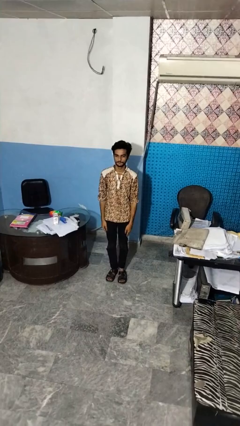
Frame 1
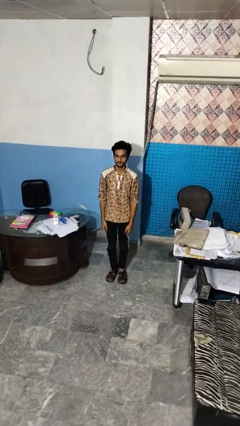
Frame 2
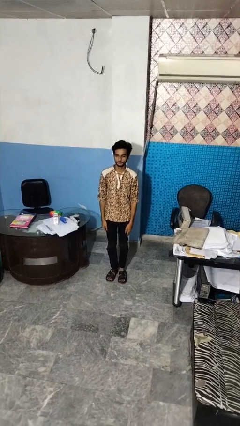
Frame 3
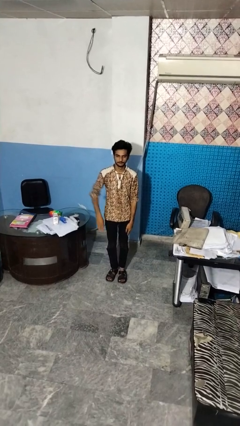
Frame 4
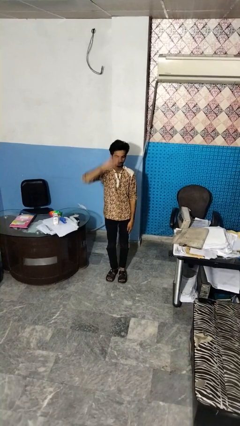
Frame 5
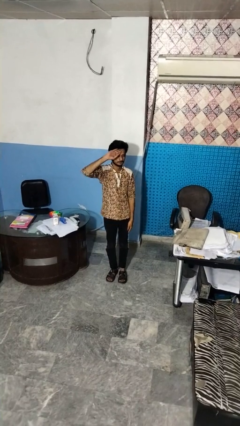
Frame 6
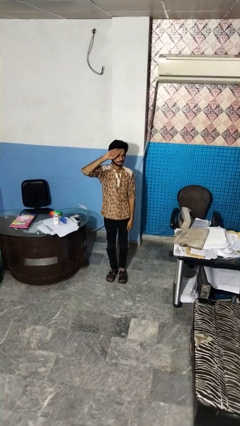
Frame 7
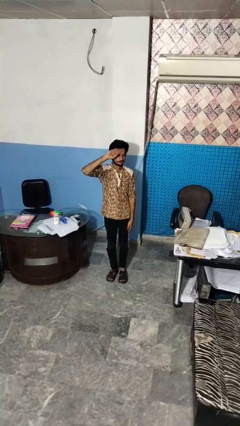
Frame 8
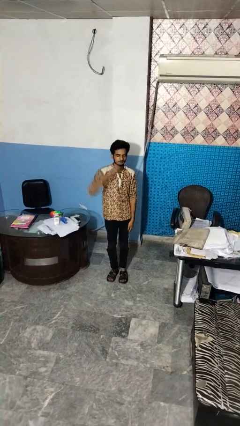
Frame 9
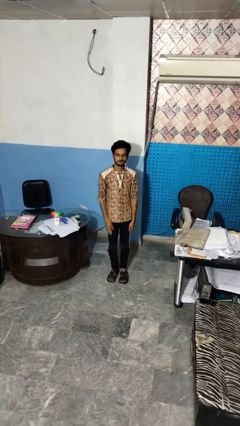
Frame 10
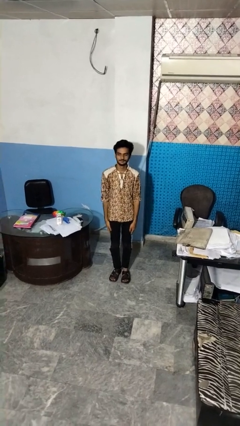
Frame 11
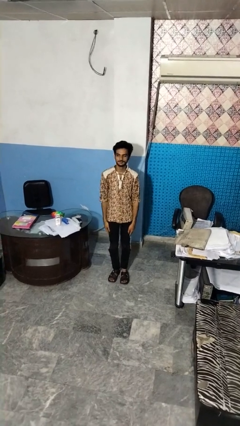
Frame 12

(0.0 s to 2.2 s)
person salutes

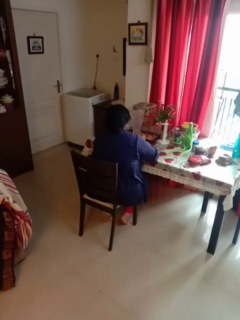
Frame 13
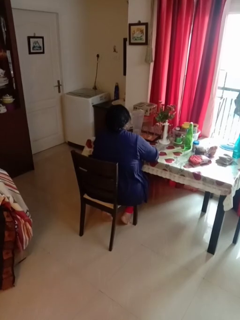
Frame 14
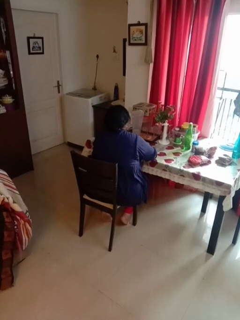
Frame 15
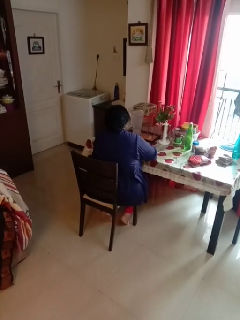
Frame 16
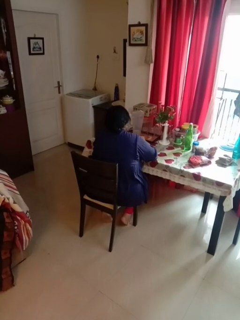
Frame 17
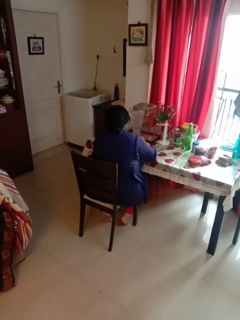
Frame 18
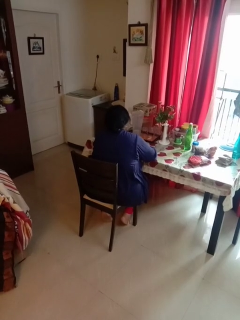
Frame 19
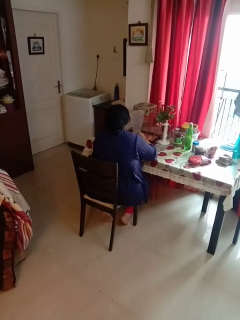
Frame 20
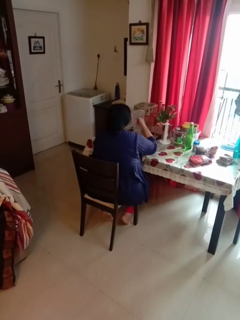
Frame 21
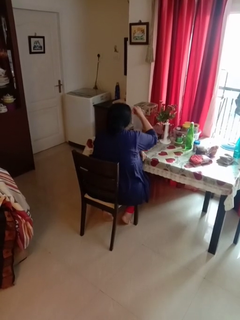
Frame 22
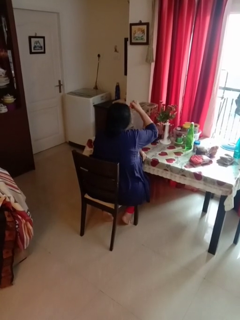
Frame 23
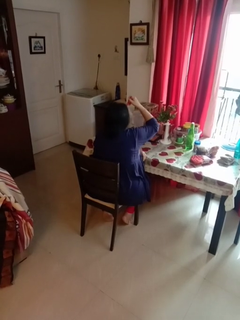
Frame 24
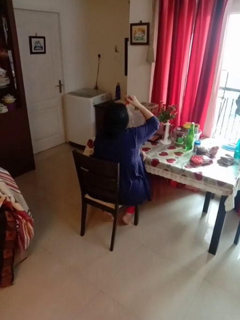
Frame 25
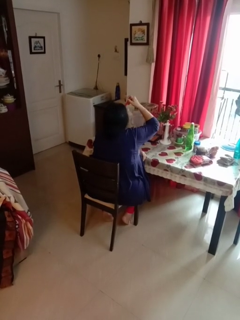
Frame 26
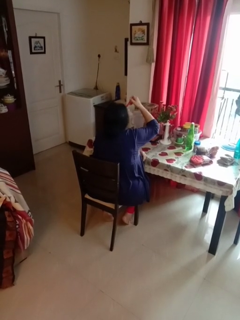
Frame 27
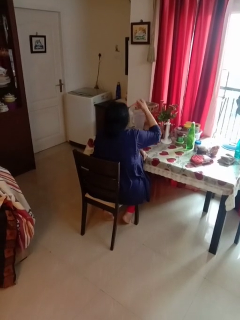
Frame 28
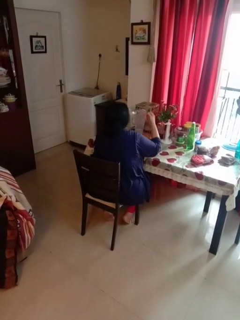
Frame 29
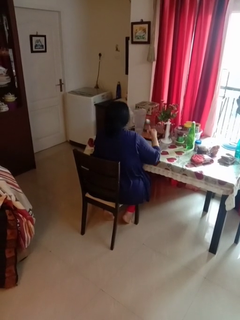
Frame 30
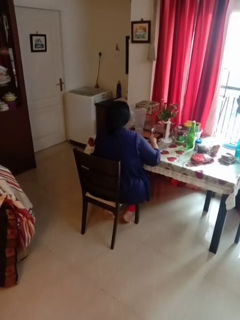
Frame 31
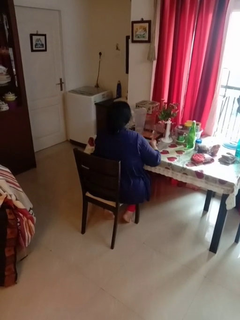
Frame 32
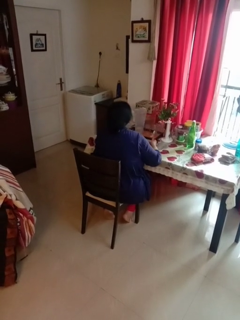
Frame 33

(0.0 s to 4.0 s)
person eats with utensil

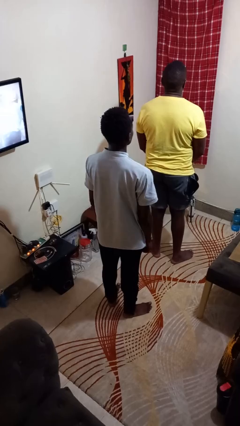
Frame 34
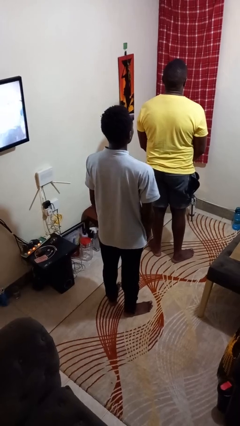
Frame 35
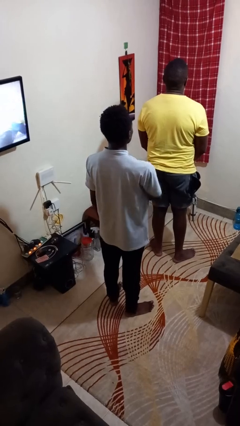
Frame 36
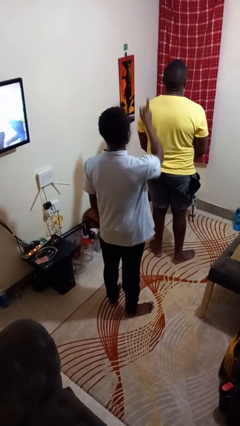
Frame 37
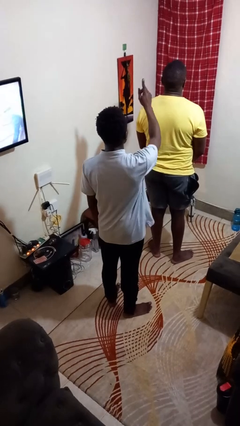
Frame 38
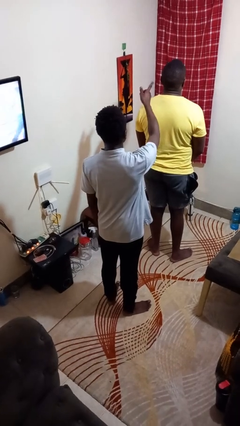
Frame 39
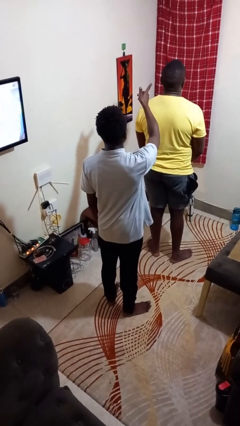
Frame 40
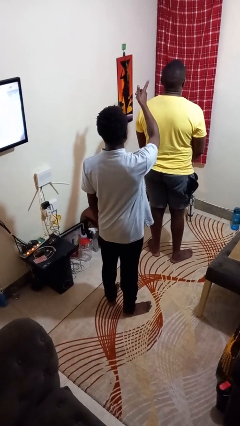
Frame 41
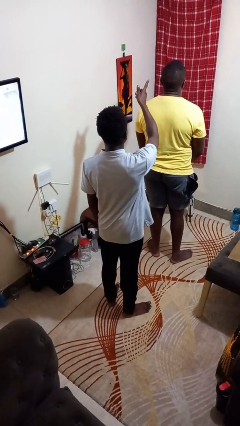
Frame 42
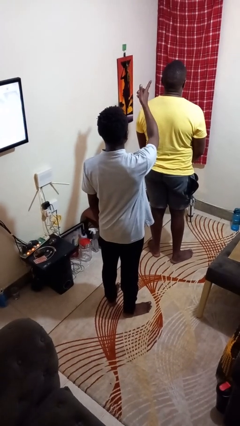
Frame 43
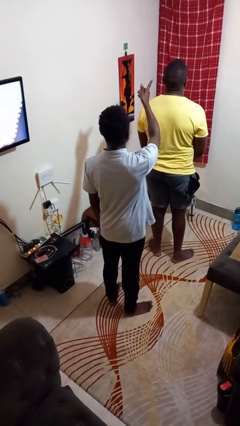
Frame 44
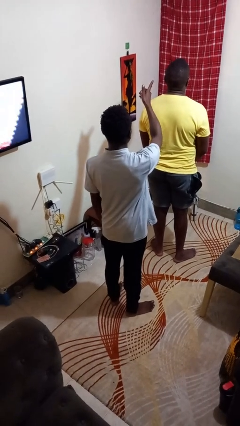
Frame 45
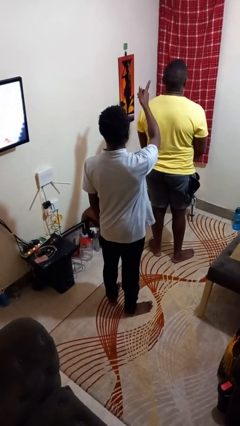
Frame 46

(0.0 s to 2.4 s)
person points at person

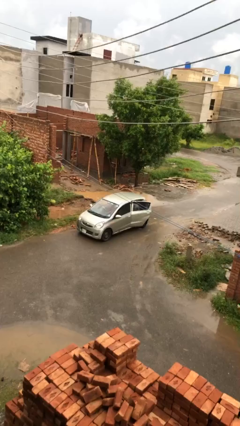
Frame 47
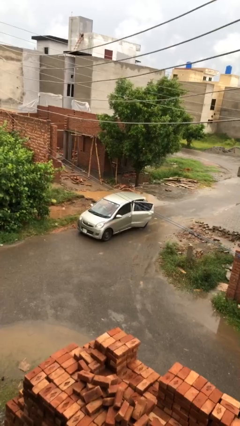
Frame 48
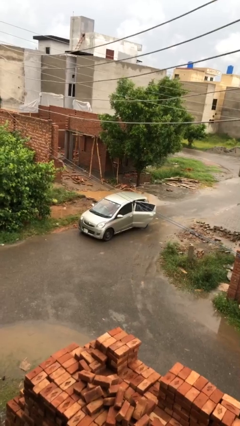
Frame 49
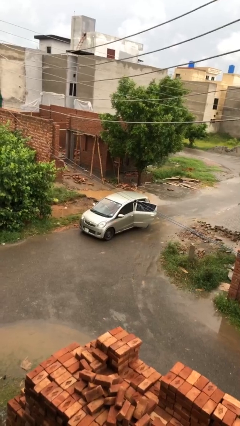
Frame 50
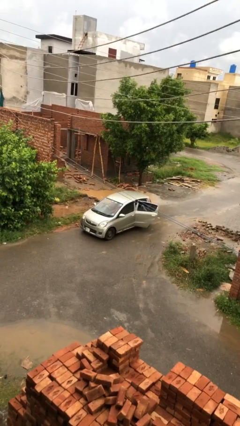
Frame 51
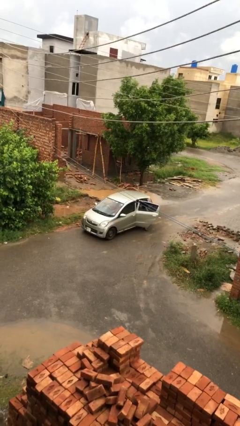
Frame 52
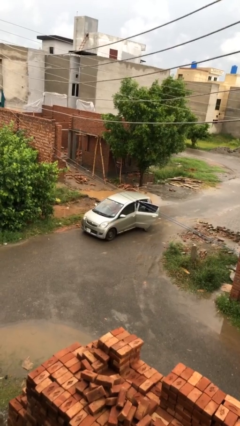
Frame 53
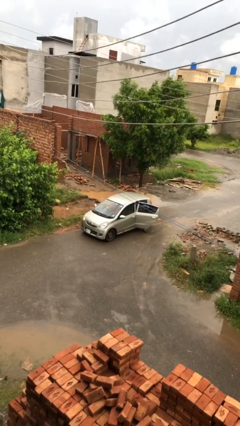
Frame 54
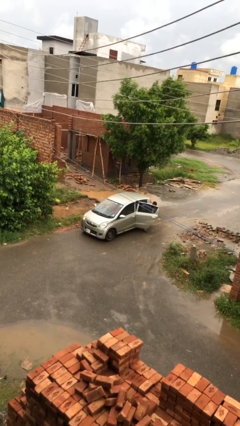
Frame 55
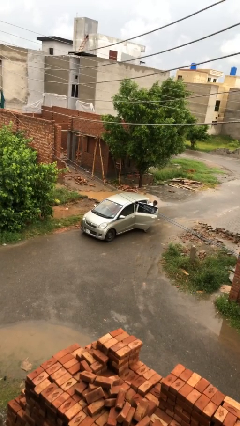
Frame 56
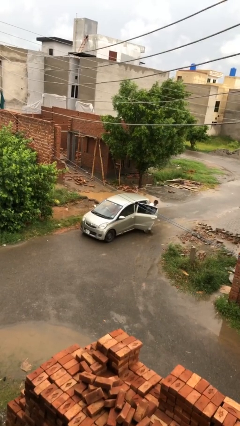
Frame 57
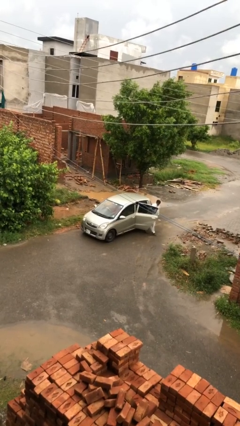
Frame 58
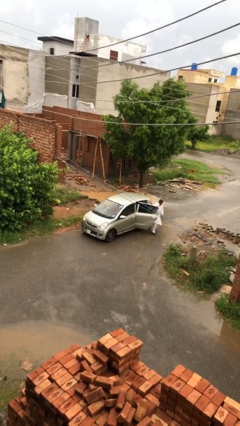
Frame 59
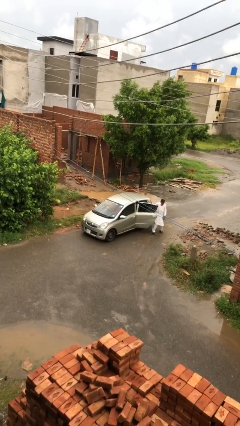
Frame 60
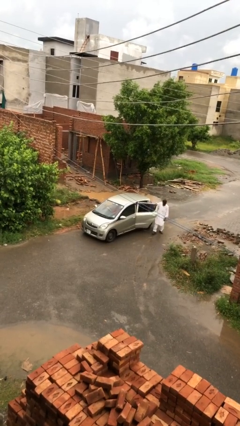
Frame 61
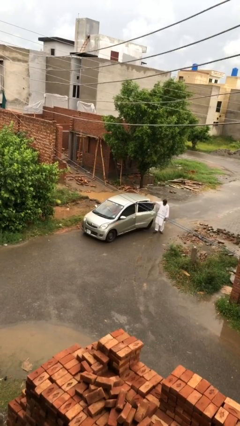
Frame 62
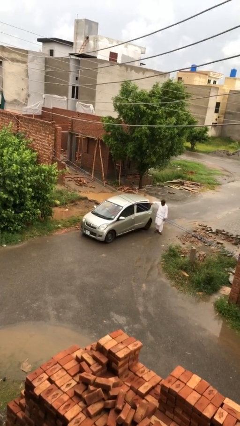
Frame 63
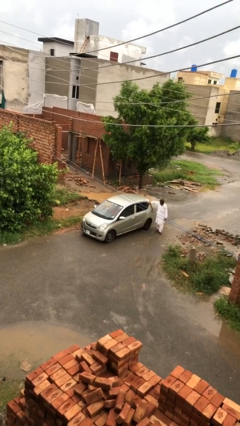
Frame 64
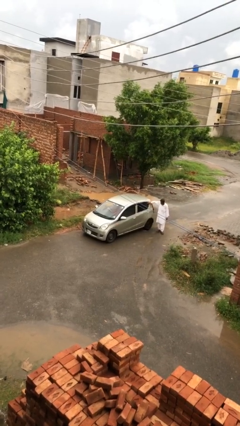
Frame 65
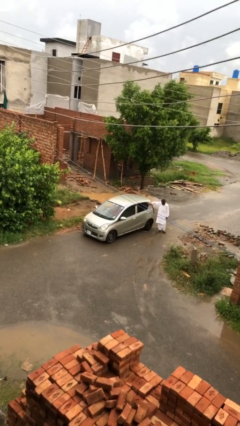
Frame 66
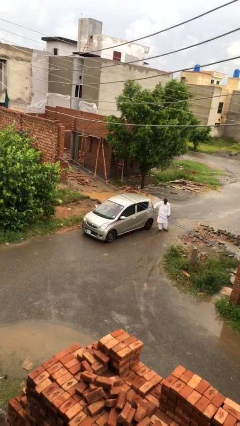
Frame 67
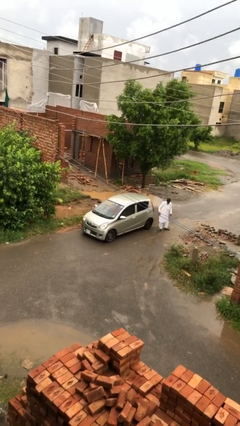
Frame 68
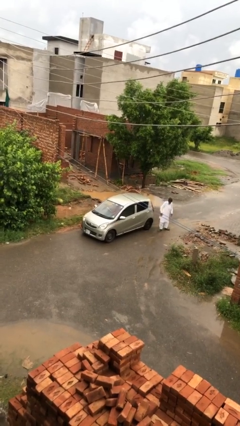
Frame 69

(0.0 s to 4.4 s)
car drops off person

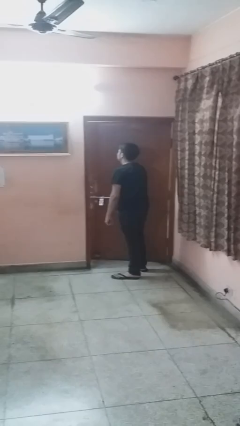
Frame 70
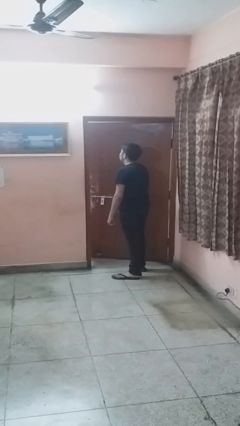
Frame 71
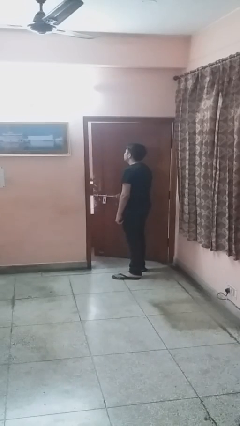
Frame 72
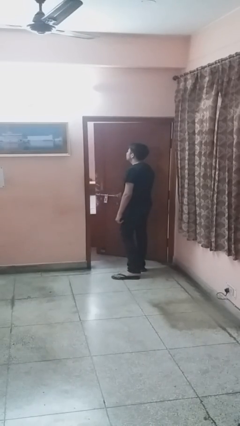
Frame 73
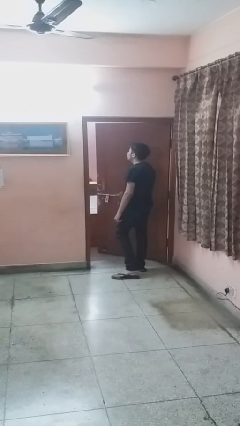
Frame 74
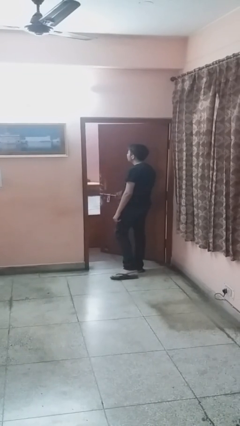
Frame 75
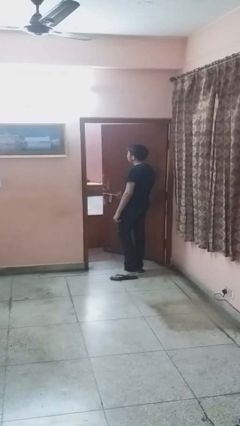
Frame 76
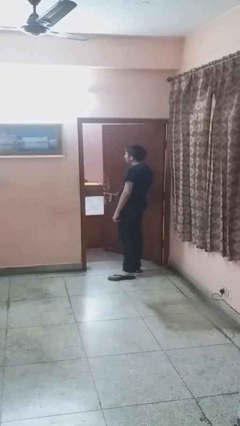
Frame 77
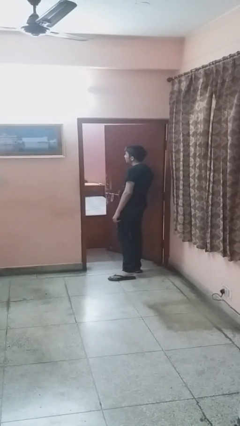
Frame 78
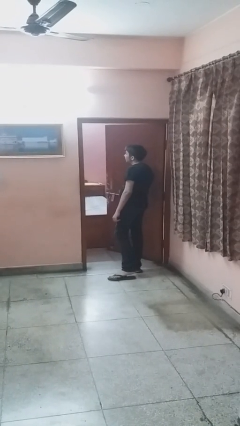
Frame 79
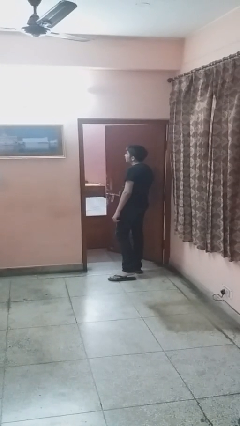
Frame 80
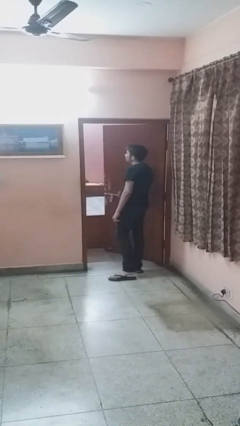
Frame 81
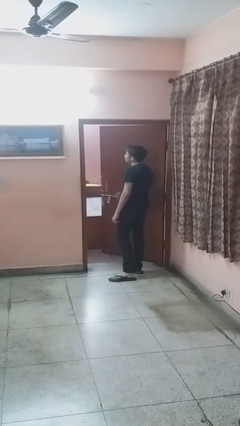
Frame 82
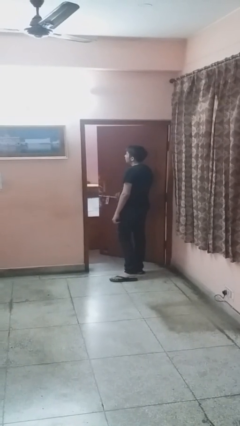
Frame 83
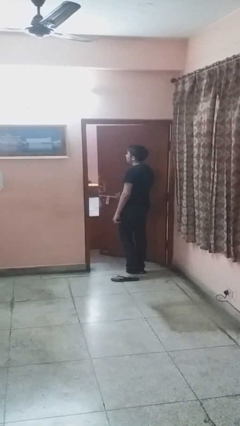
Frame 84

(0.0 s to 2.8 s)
person opens facility door

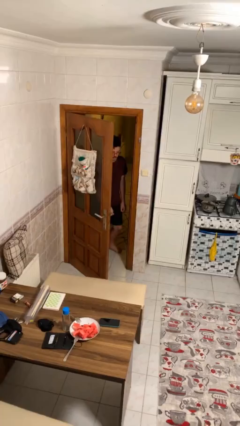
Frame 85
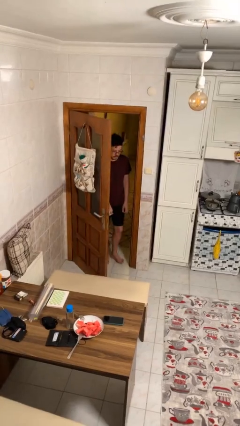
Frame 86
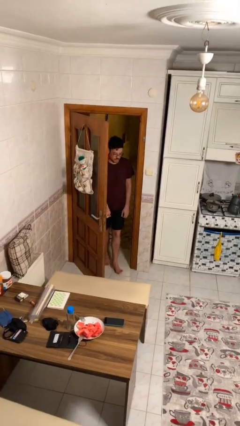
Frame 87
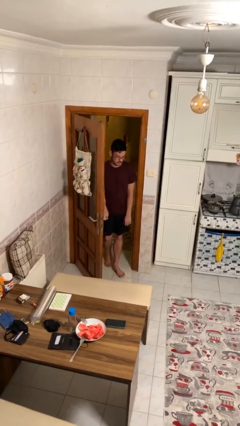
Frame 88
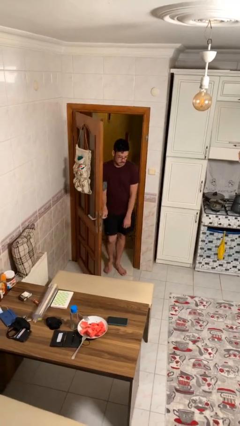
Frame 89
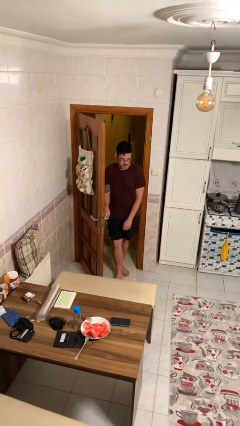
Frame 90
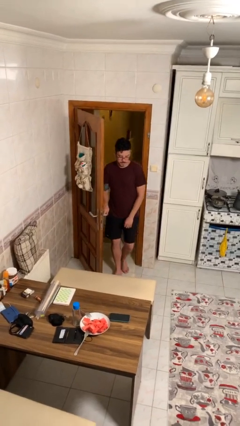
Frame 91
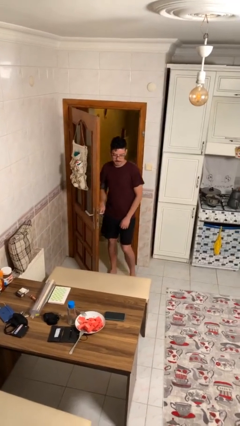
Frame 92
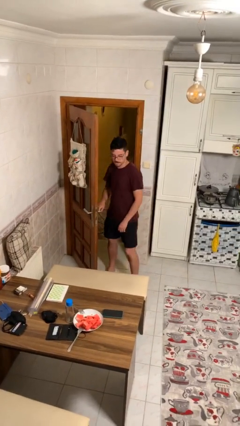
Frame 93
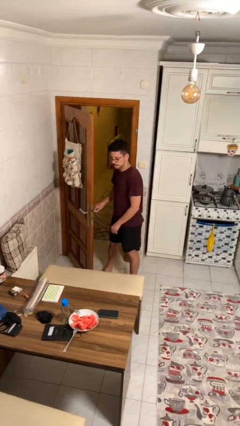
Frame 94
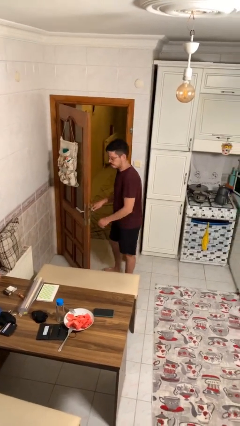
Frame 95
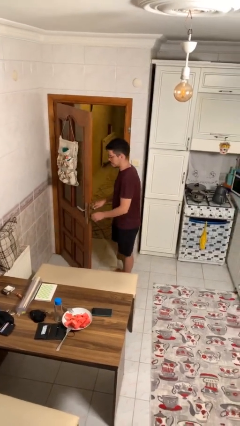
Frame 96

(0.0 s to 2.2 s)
person enters scene through structure

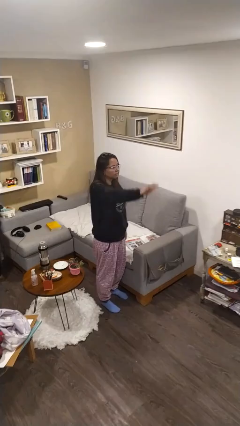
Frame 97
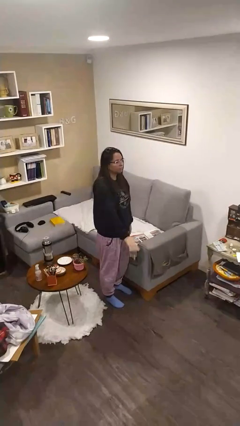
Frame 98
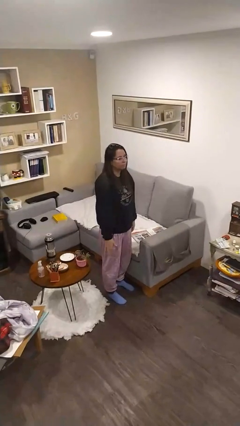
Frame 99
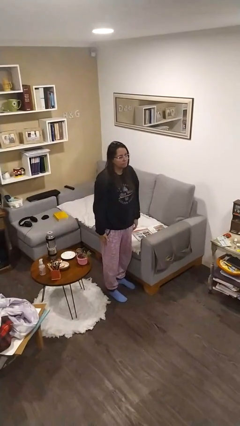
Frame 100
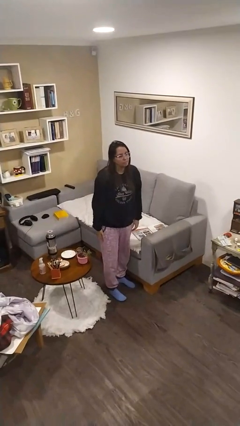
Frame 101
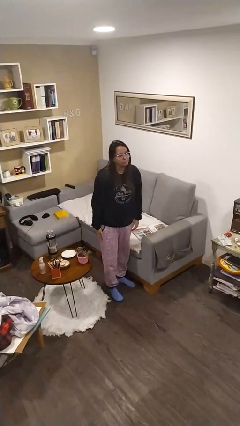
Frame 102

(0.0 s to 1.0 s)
person gestures lower hand
